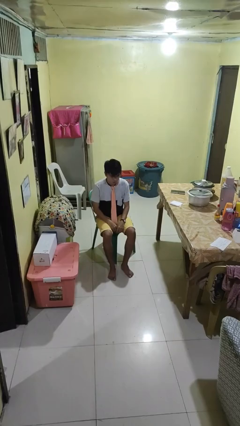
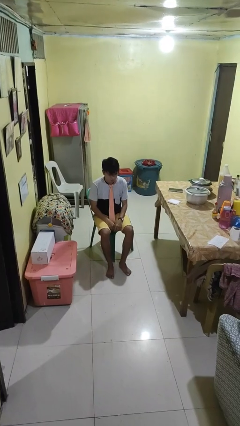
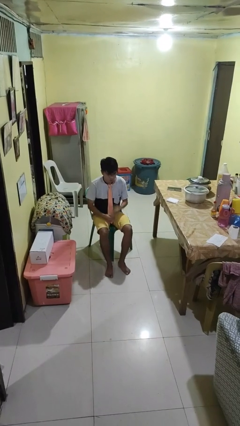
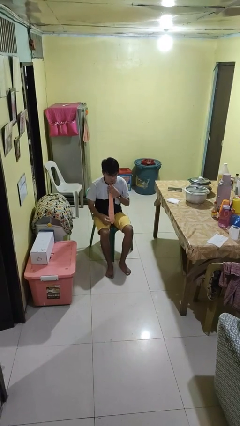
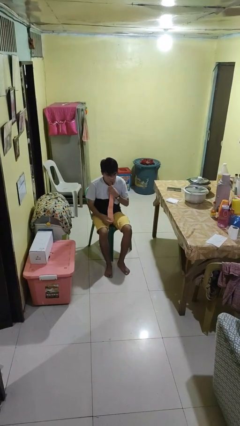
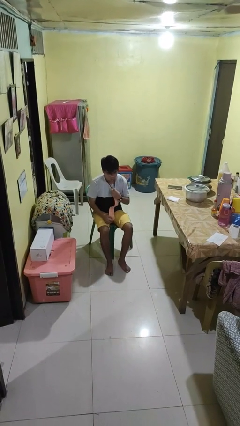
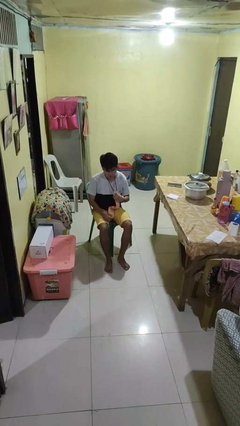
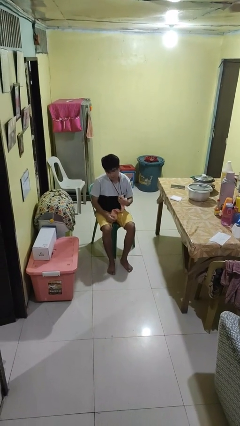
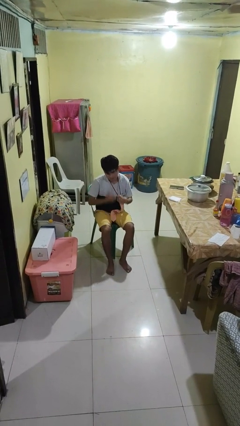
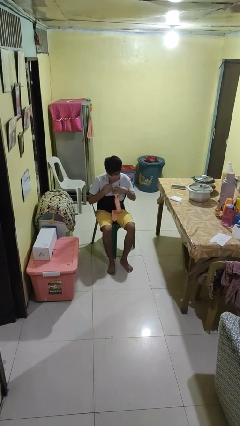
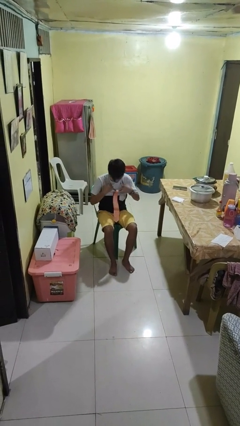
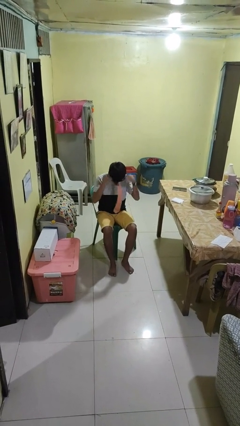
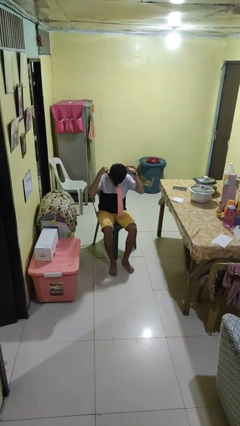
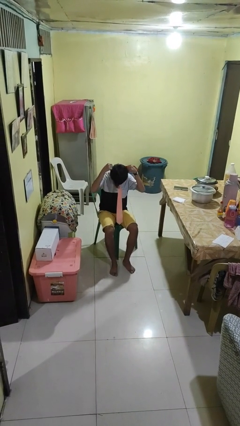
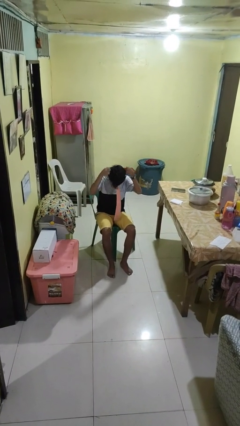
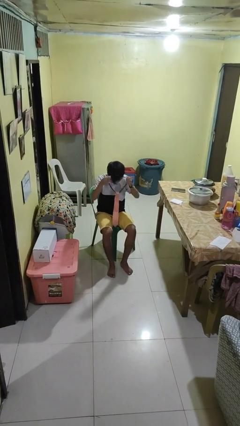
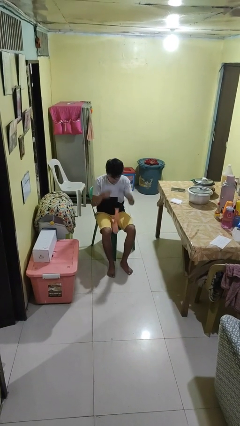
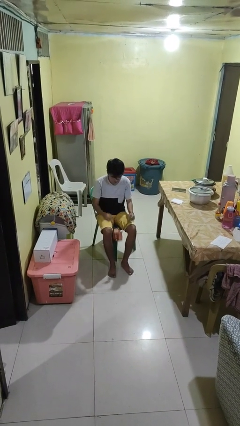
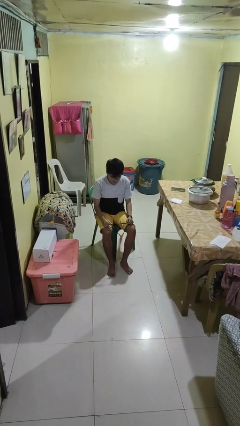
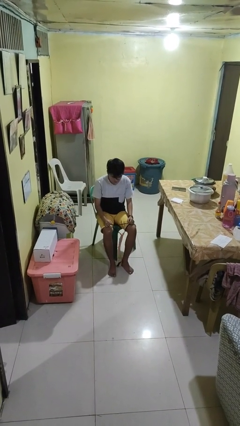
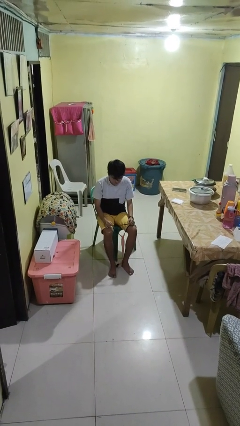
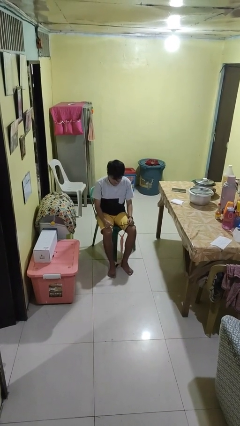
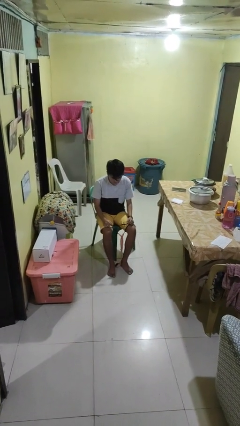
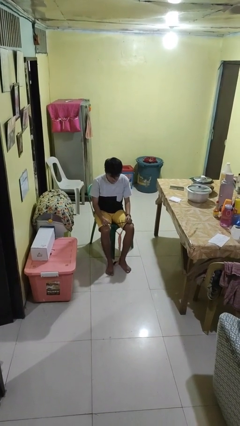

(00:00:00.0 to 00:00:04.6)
person takes off necktie

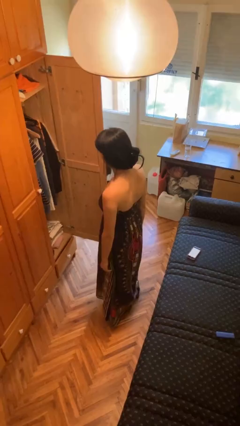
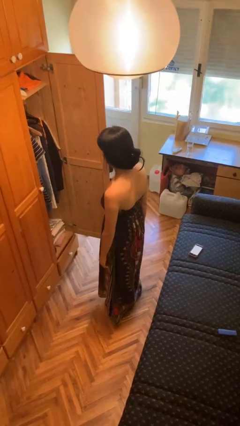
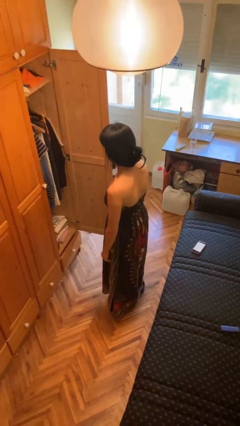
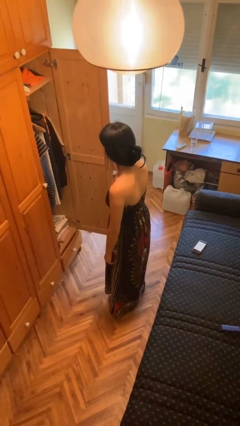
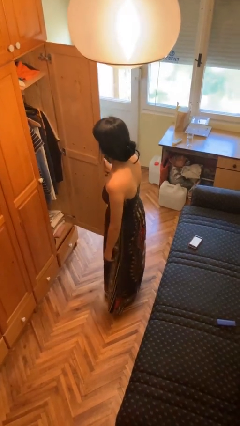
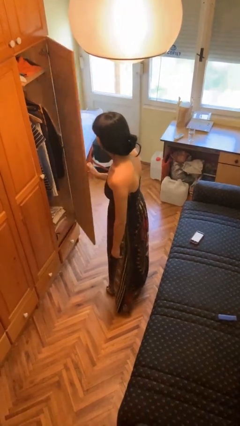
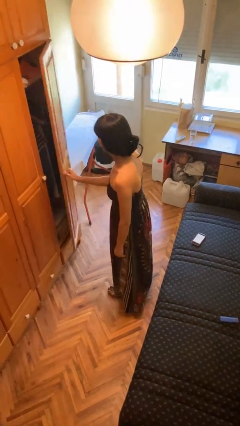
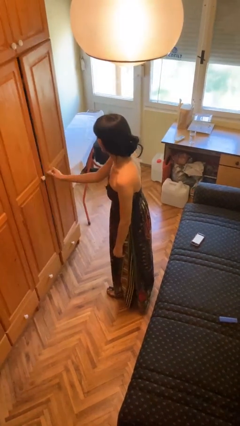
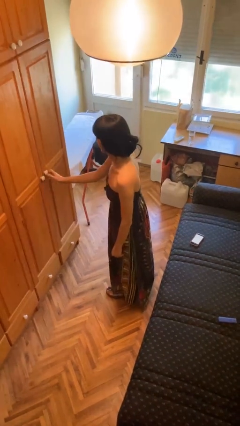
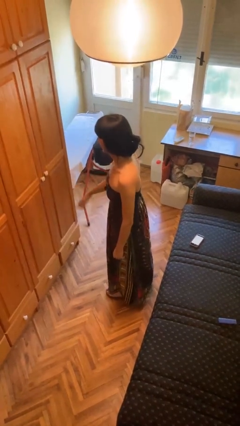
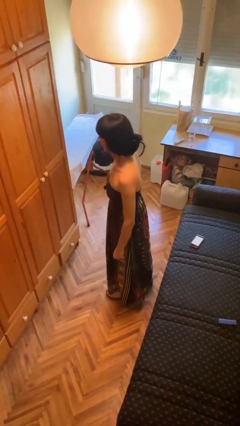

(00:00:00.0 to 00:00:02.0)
person closes closet door

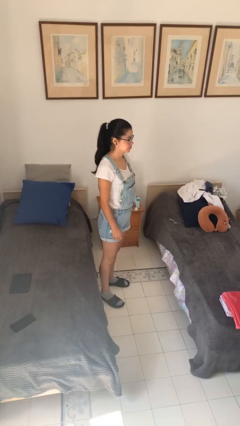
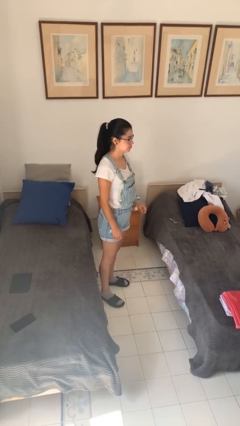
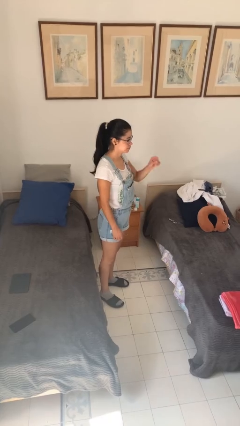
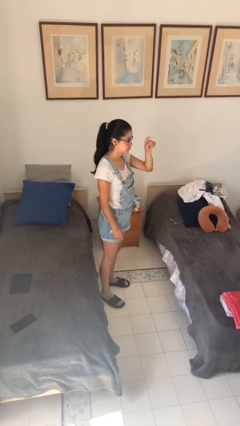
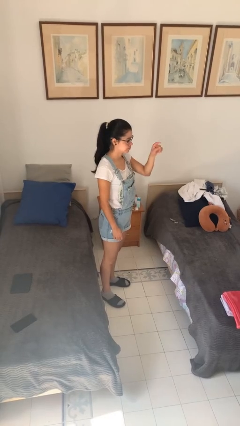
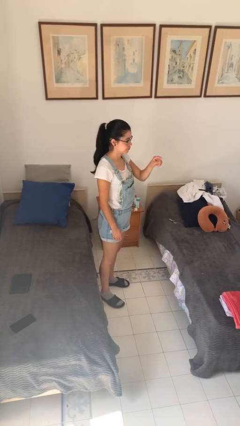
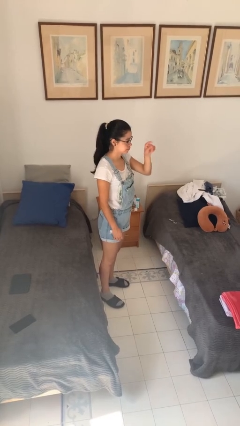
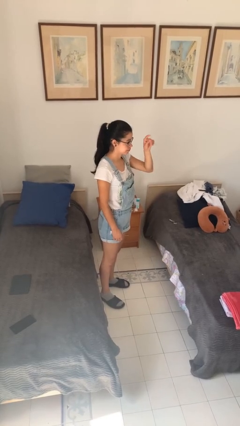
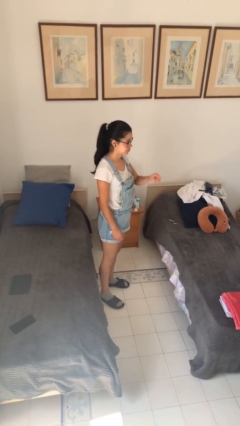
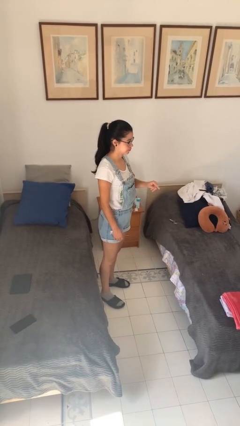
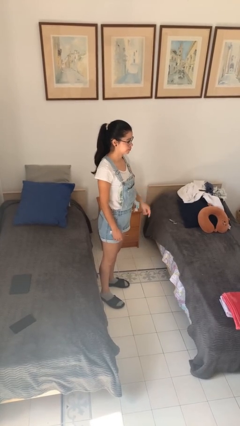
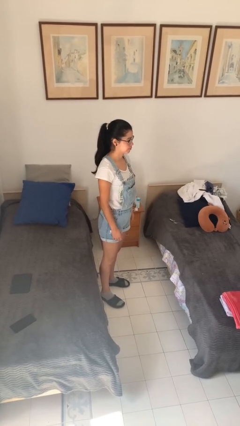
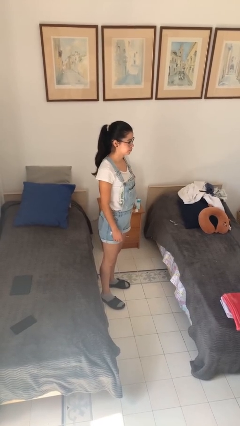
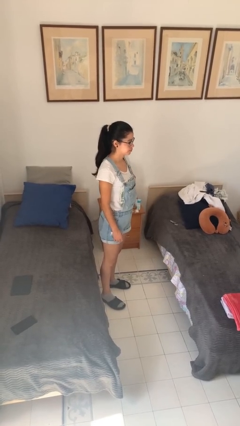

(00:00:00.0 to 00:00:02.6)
person gestures number four

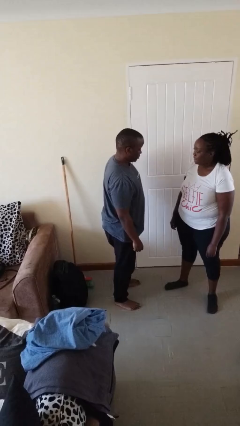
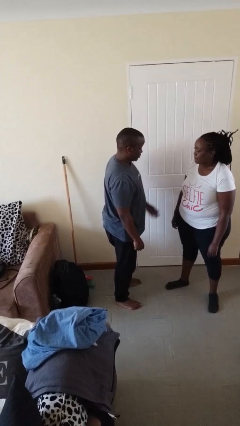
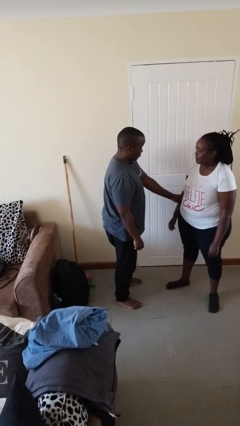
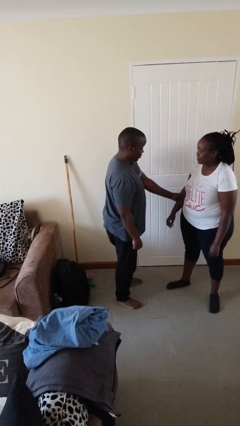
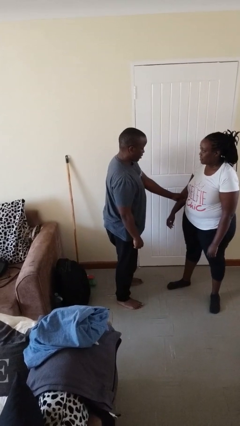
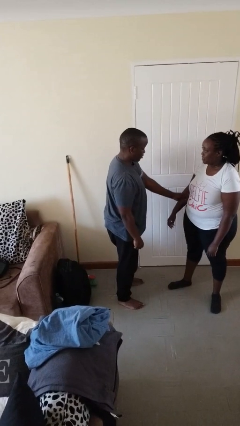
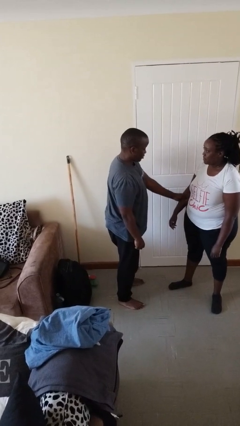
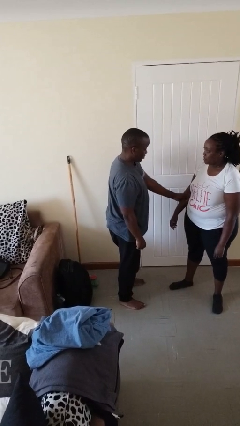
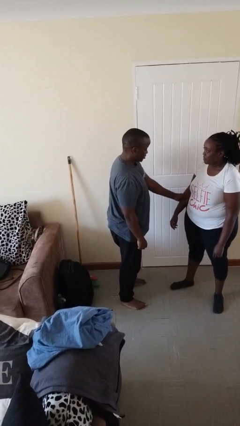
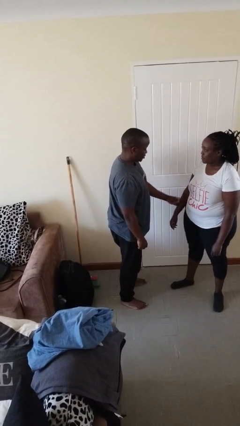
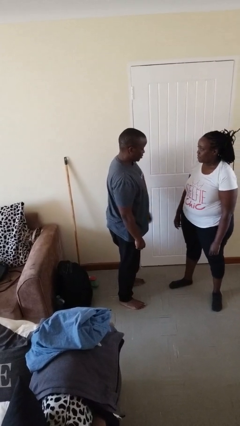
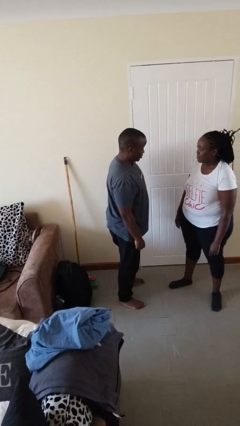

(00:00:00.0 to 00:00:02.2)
person grabs person by forearm

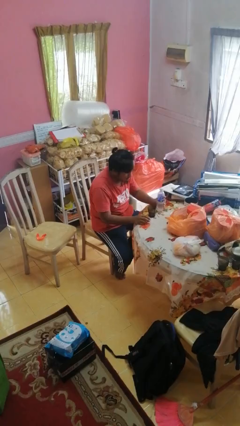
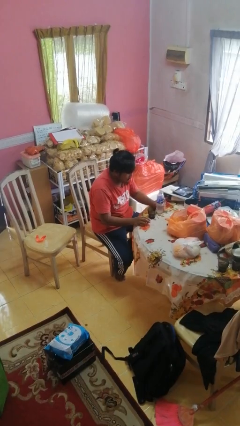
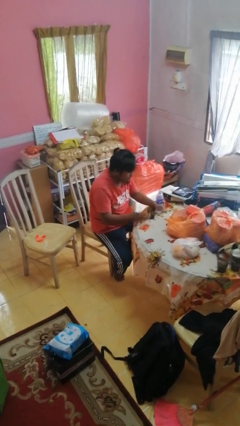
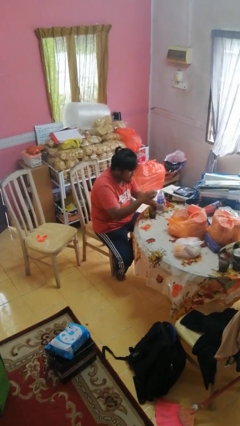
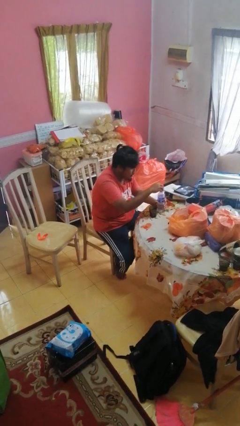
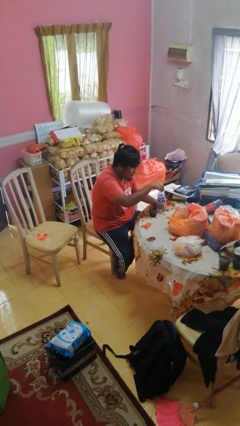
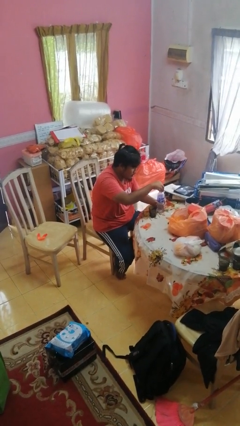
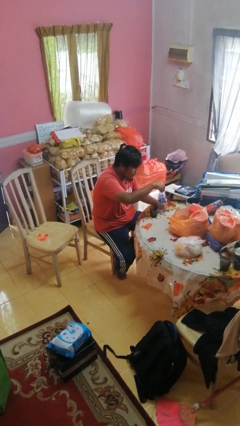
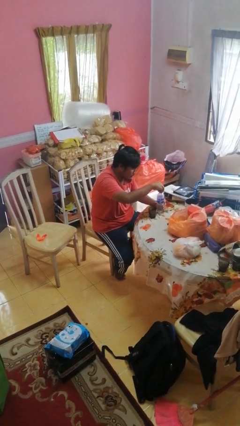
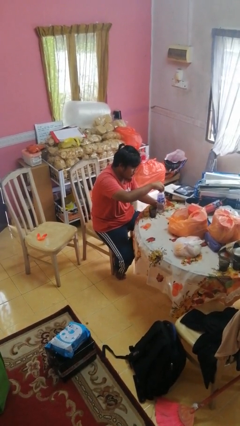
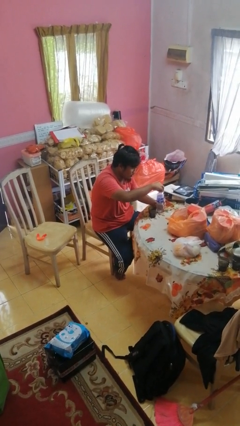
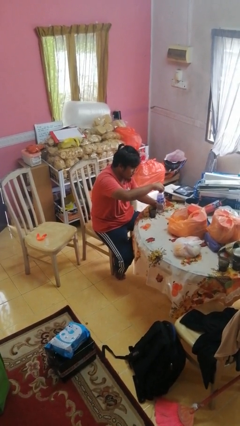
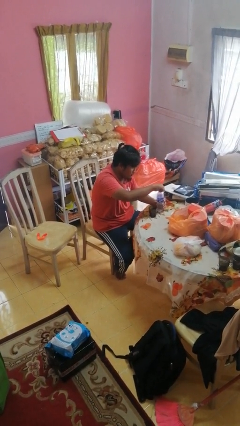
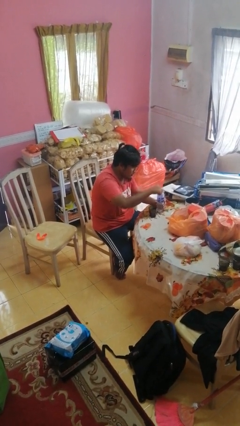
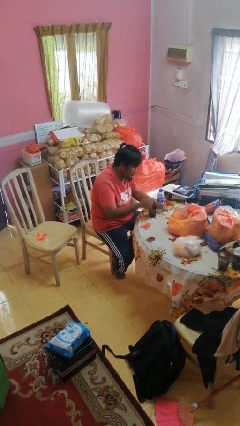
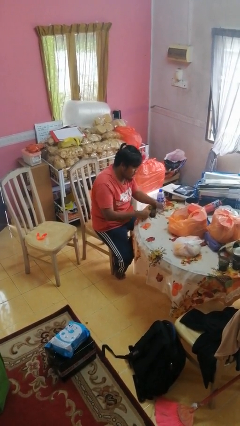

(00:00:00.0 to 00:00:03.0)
person screws lid to bottle

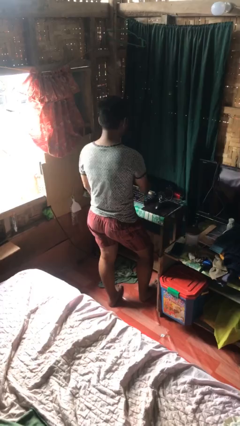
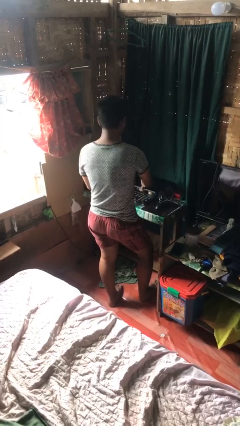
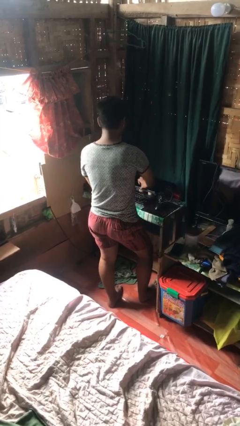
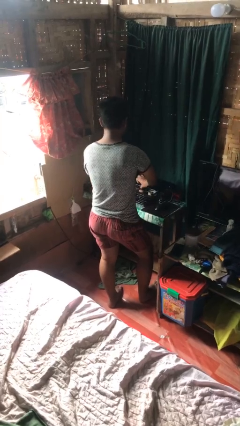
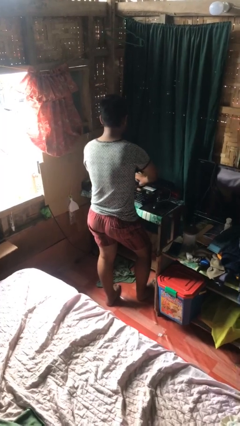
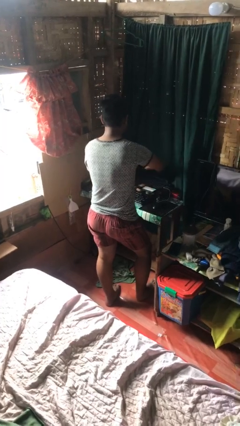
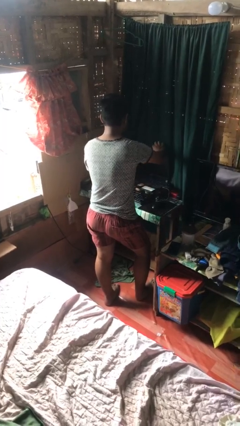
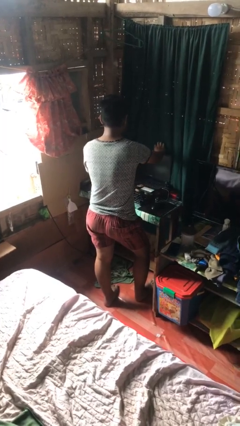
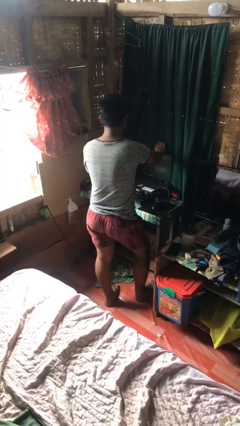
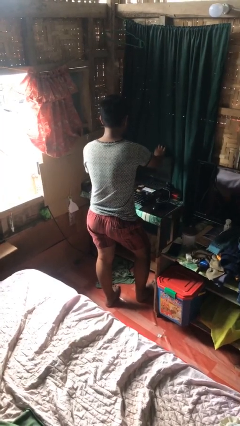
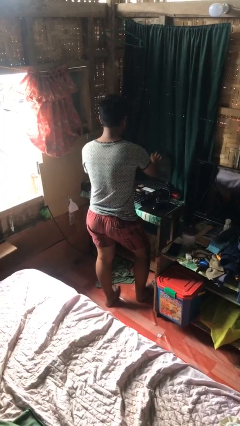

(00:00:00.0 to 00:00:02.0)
person opens laptop

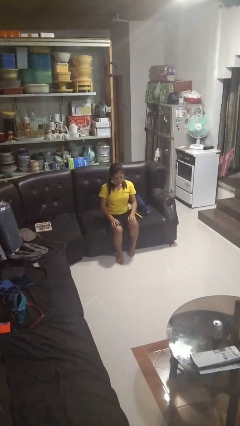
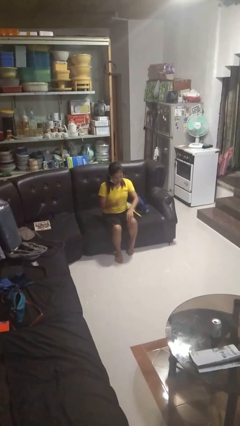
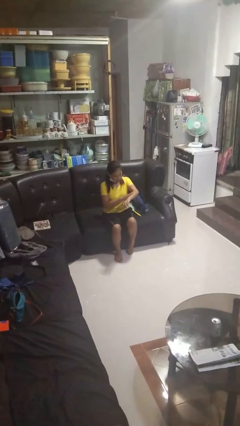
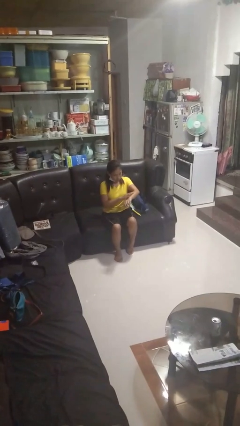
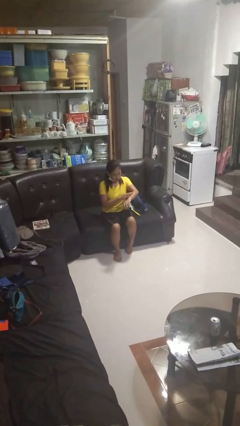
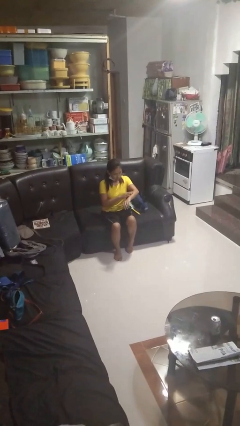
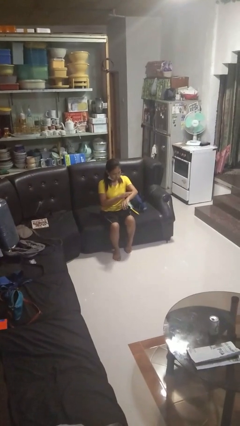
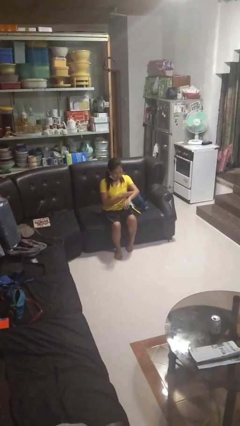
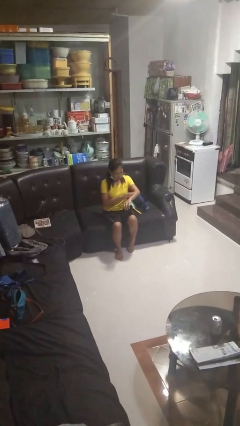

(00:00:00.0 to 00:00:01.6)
person swats bug
